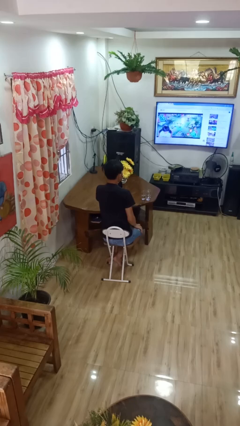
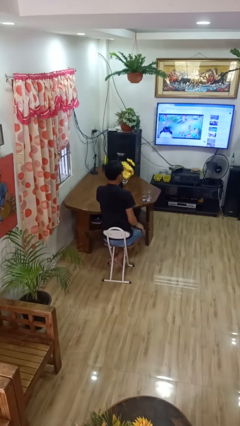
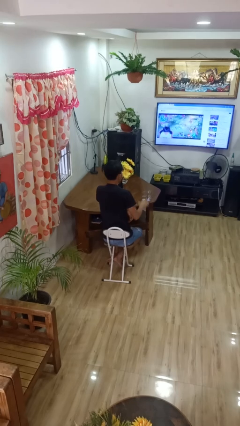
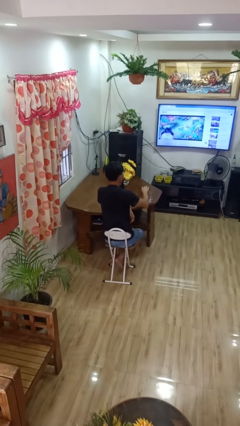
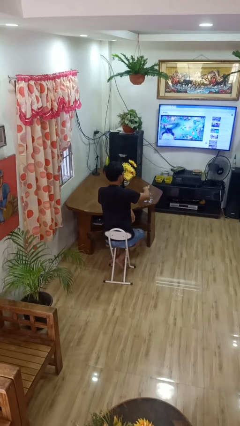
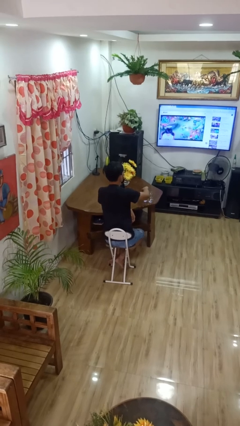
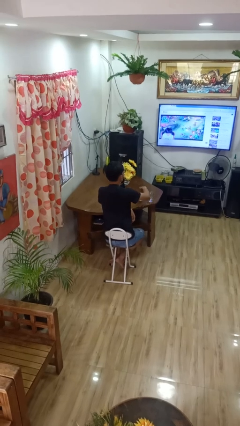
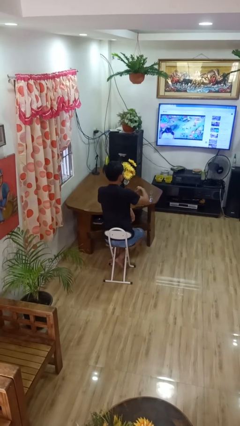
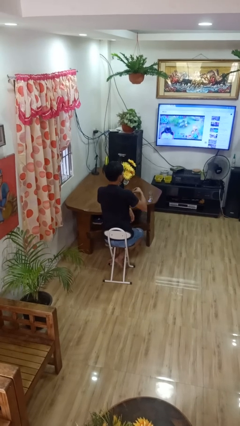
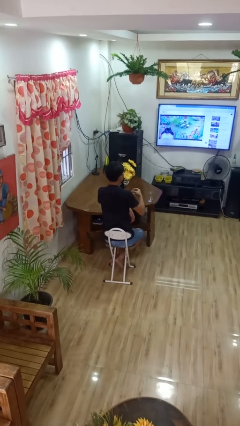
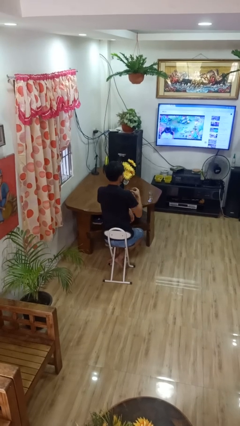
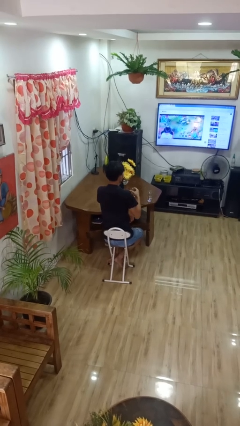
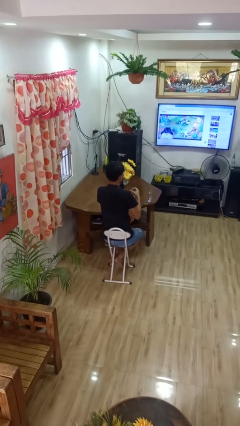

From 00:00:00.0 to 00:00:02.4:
person picks up object from table

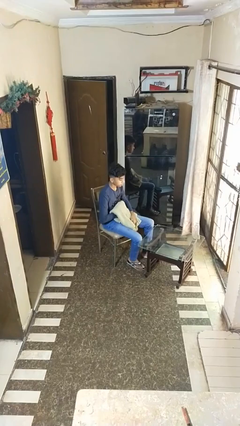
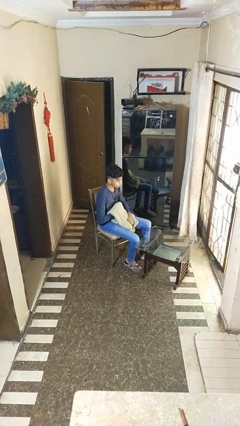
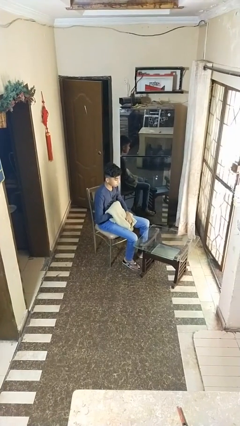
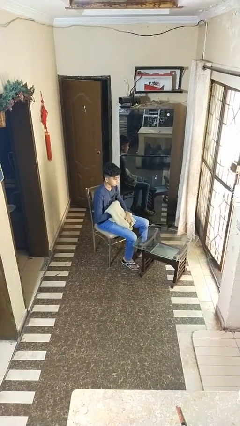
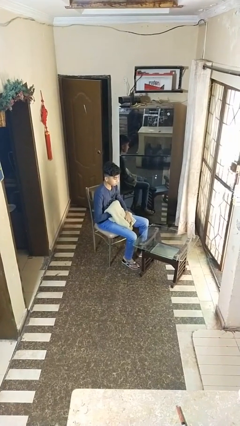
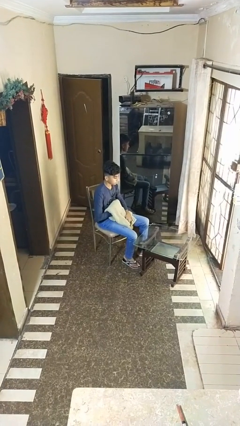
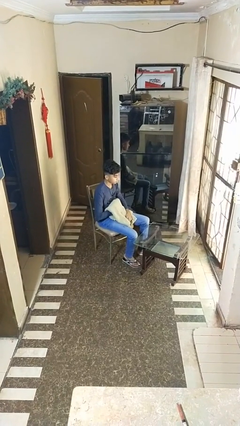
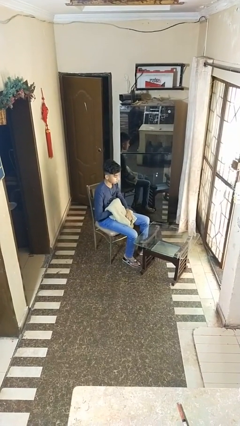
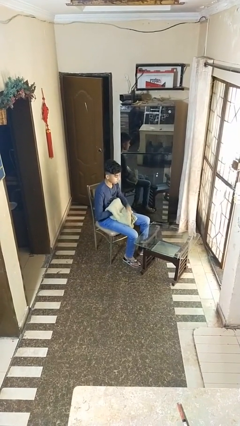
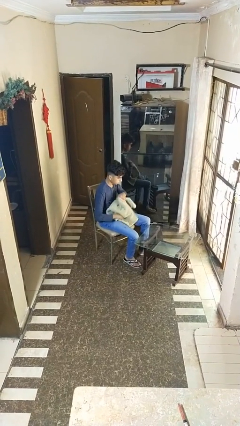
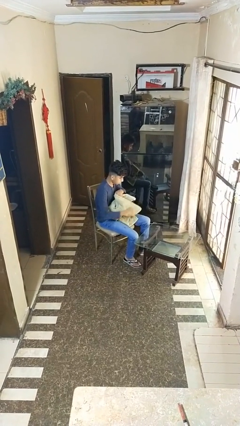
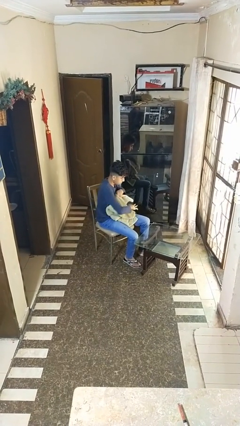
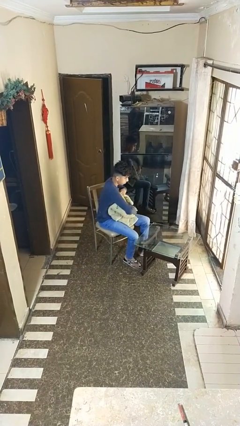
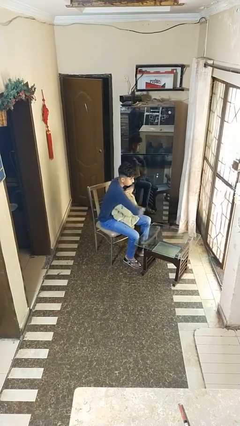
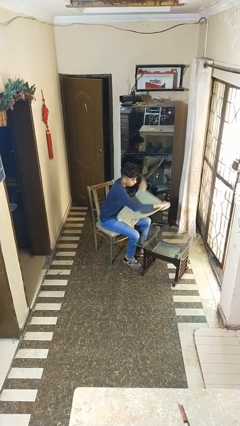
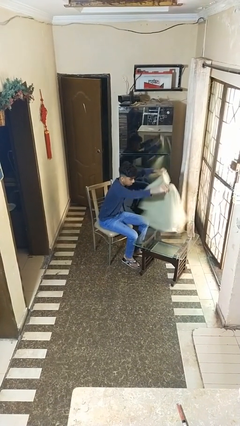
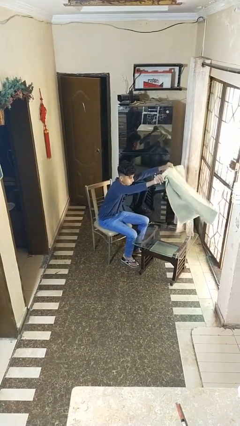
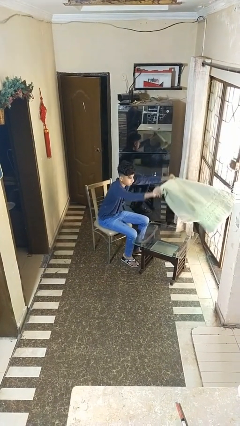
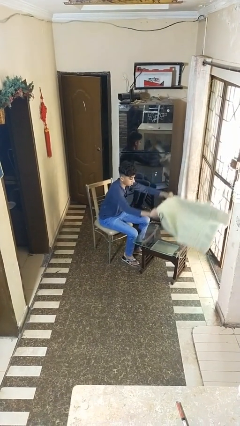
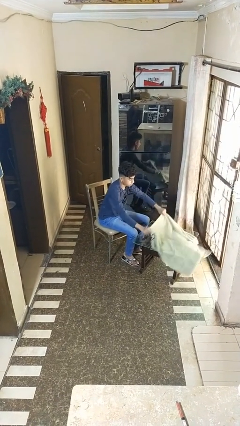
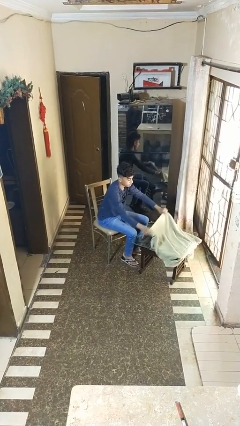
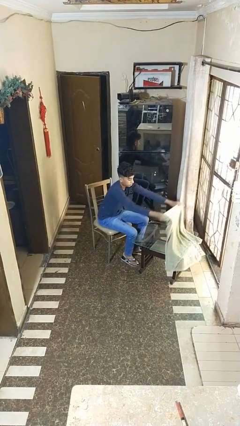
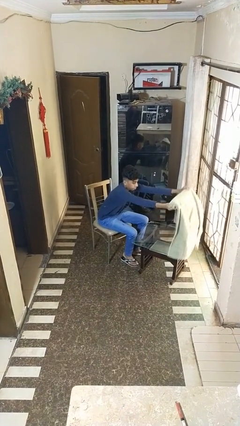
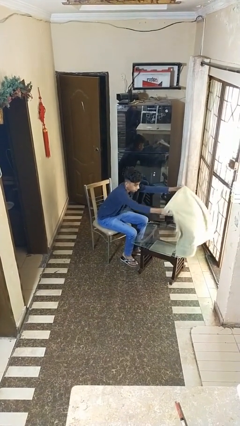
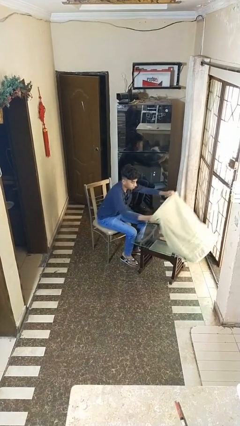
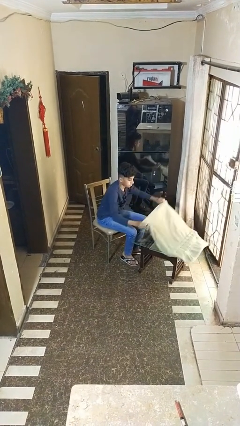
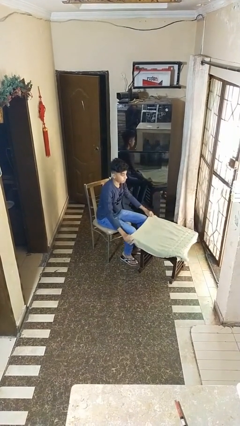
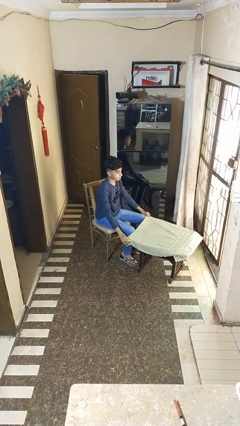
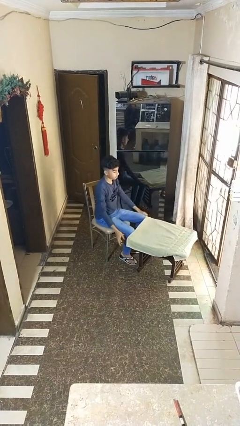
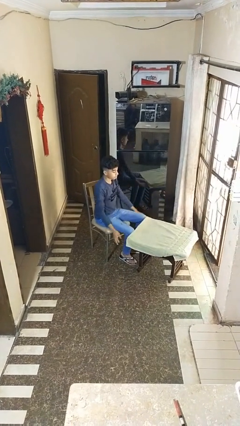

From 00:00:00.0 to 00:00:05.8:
person spreads tablecloth

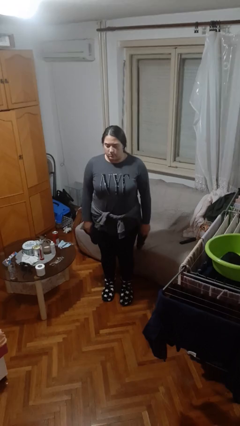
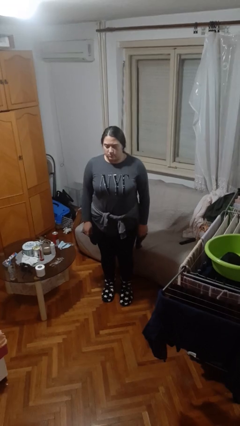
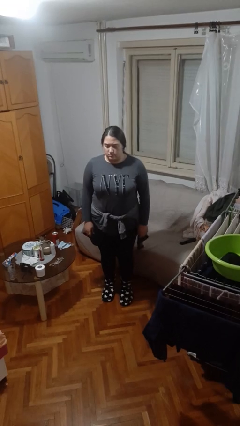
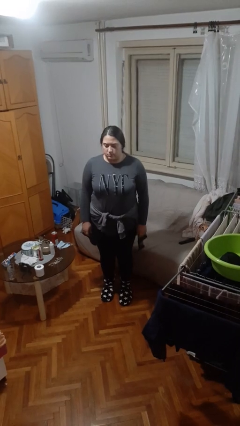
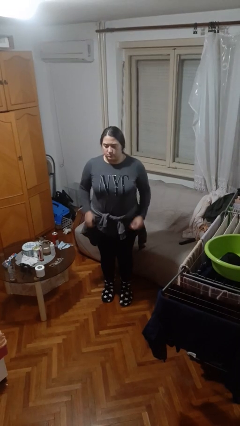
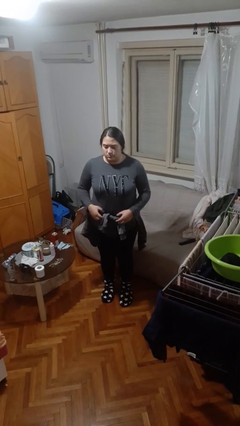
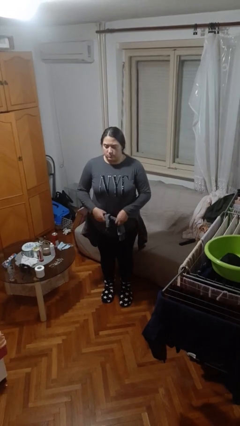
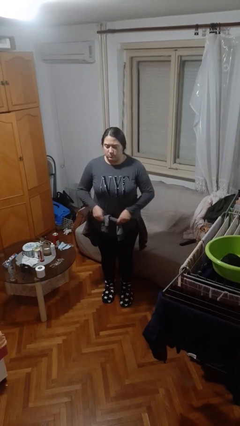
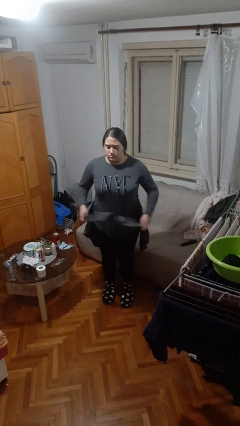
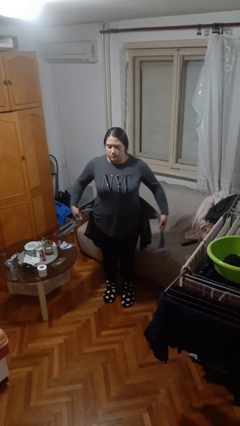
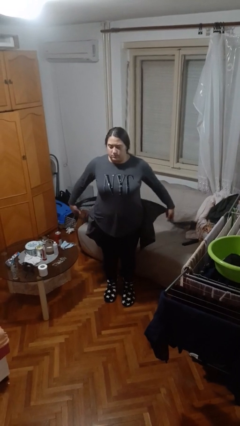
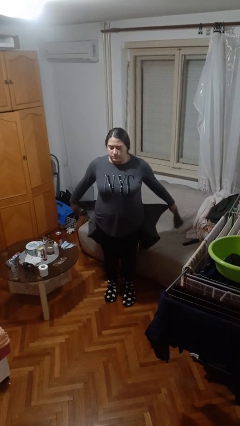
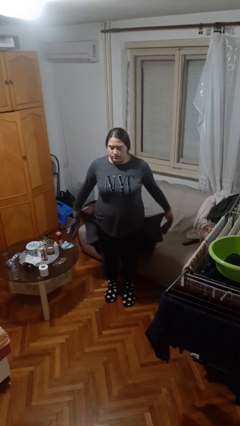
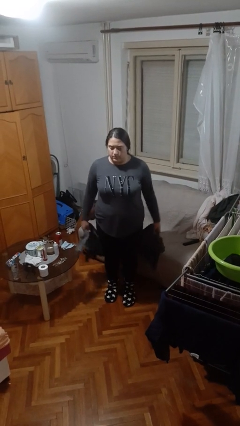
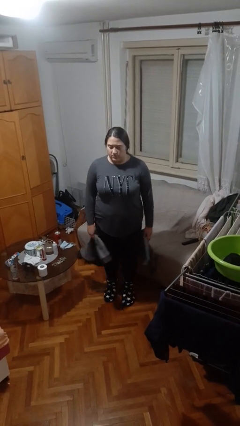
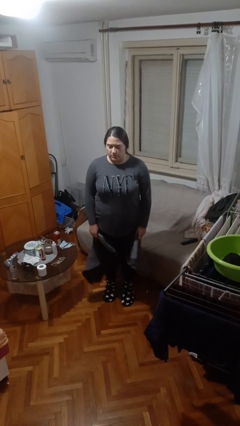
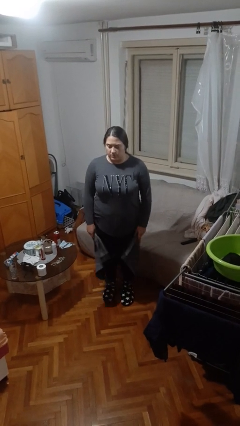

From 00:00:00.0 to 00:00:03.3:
person unties jacket around waist

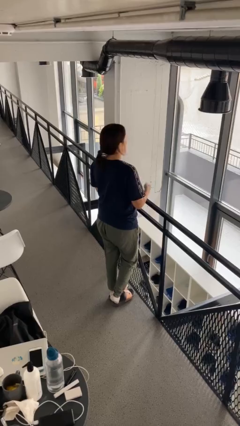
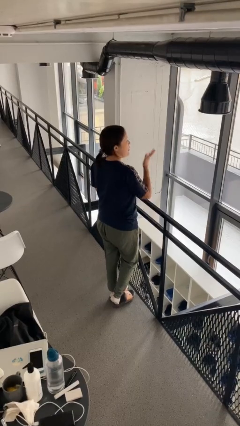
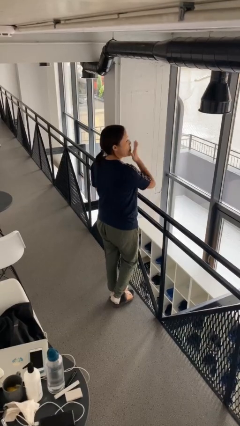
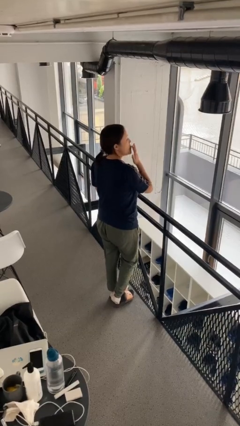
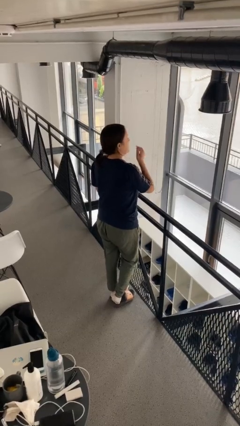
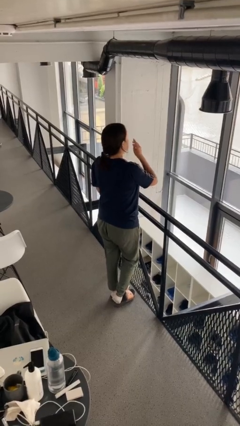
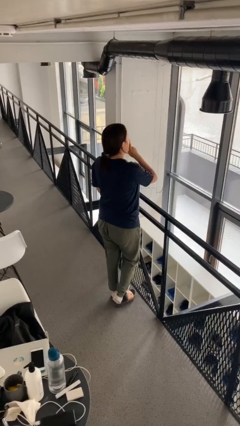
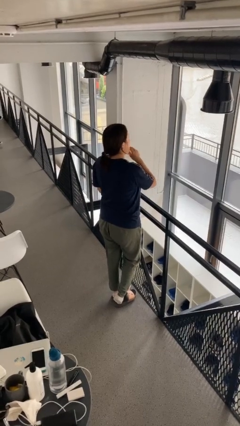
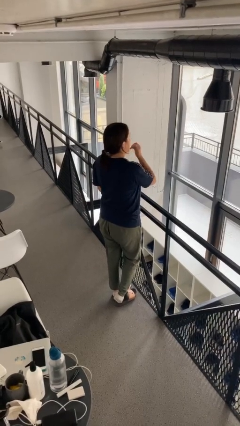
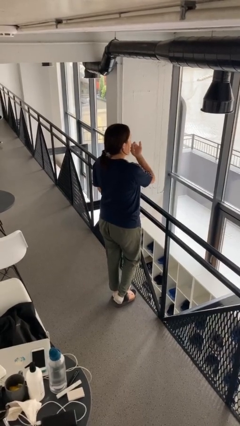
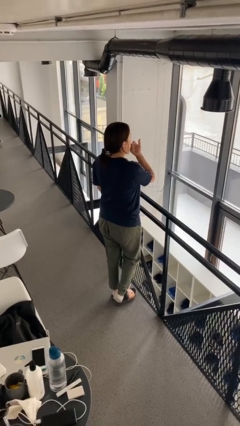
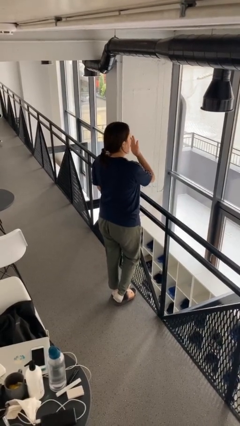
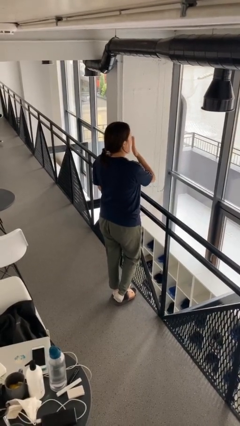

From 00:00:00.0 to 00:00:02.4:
person licks fingers

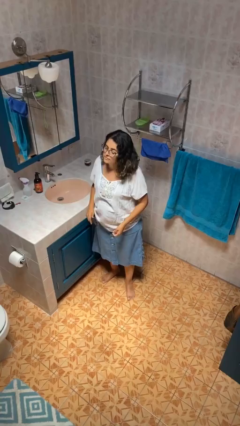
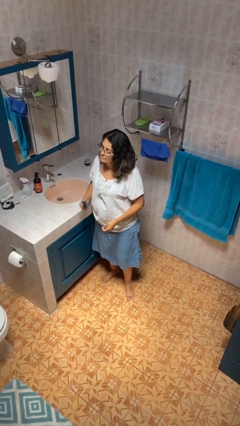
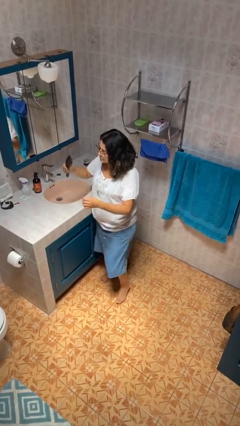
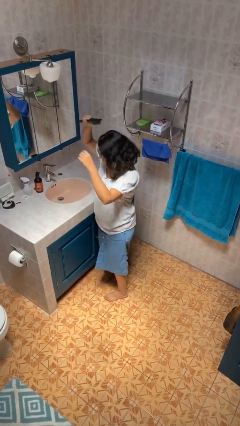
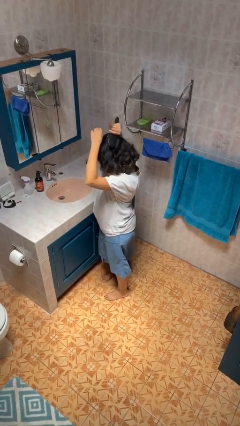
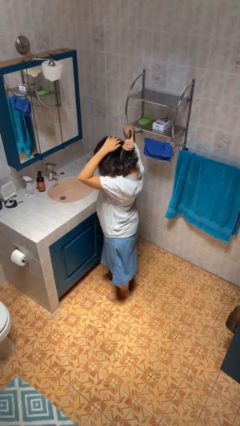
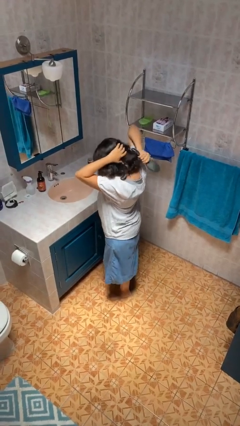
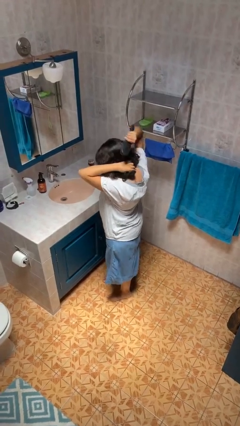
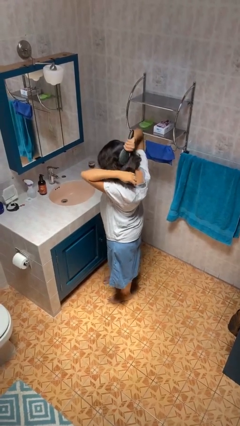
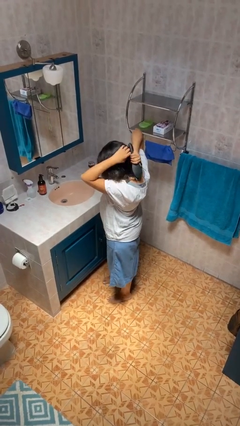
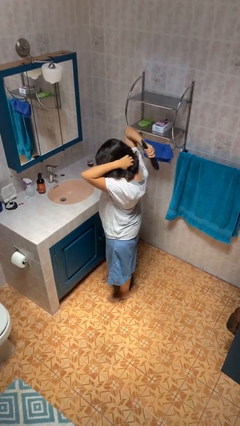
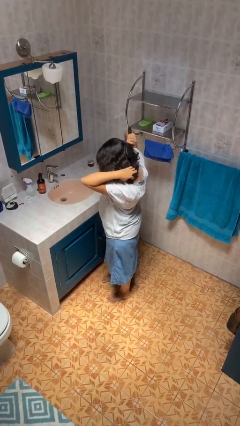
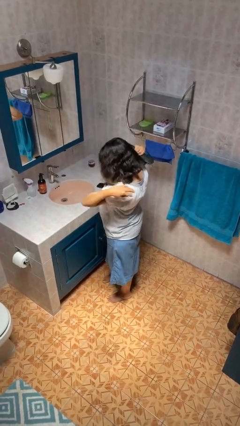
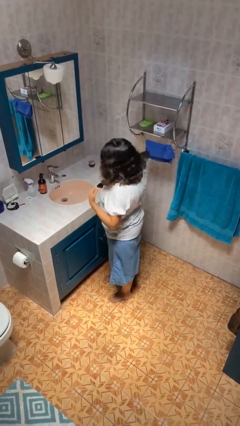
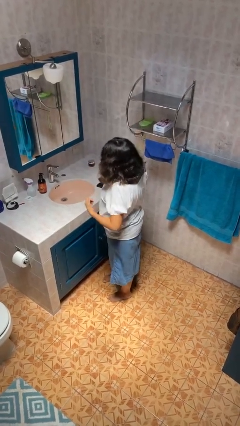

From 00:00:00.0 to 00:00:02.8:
person brushes hair

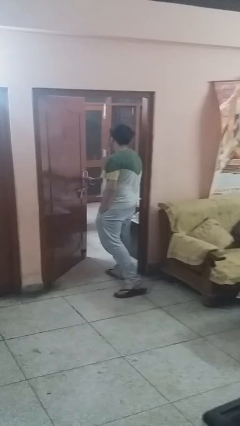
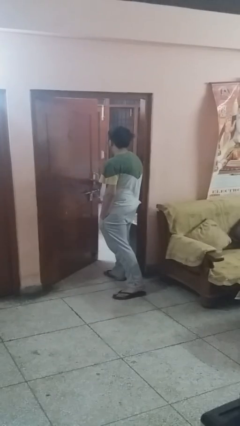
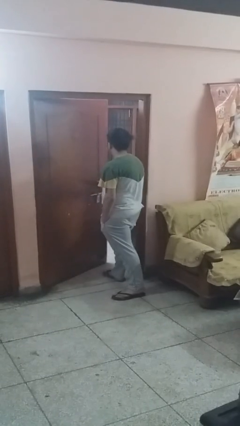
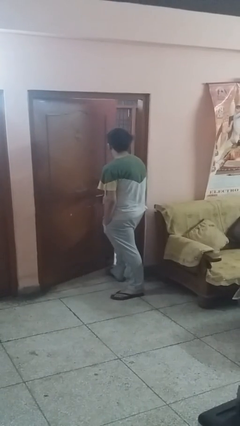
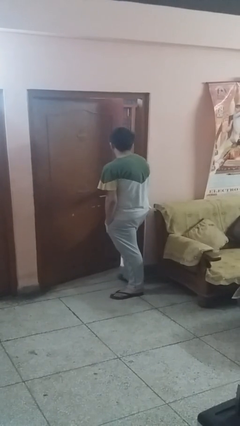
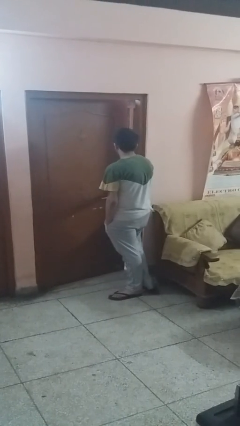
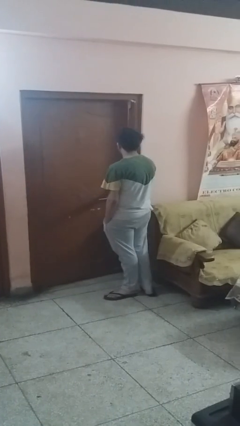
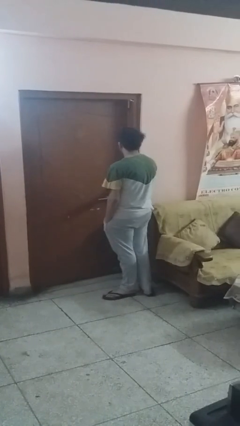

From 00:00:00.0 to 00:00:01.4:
person closes facility door
